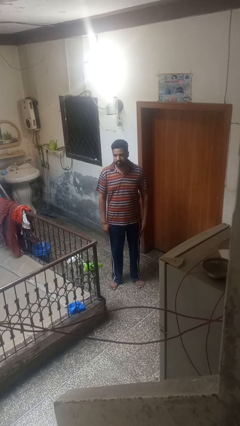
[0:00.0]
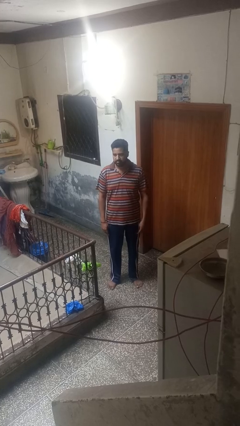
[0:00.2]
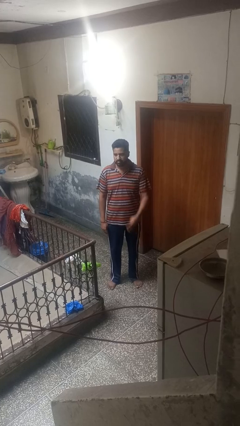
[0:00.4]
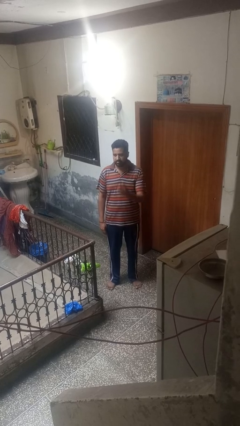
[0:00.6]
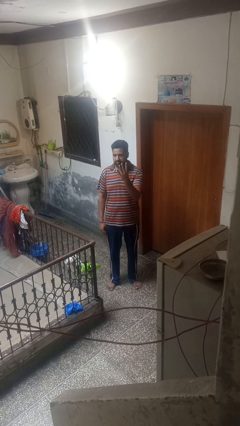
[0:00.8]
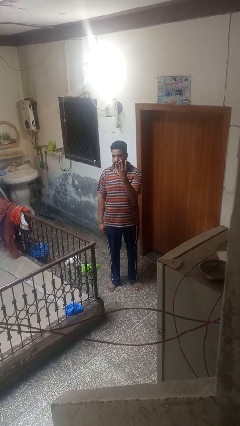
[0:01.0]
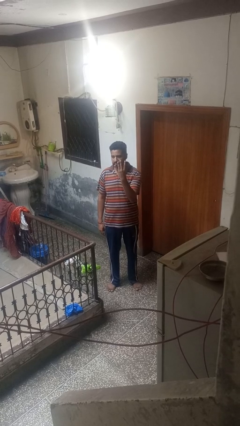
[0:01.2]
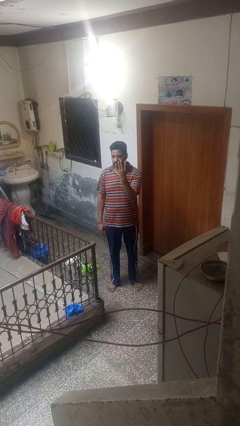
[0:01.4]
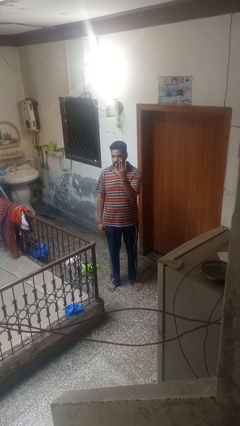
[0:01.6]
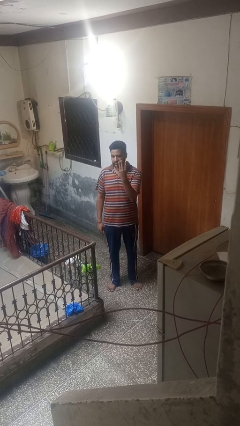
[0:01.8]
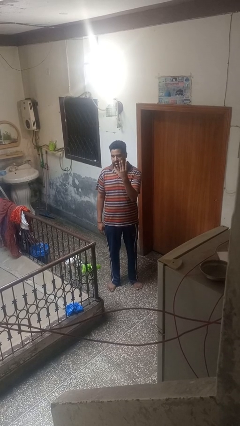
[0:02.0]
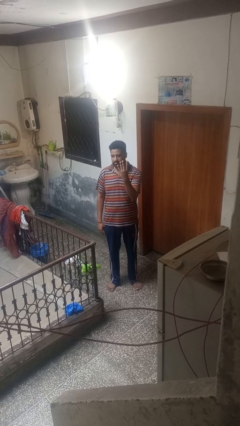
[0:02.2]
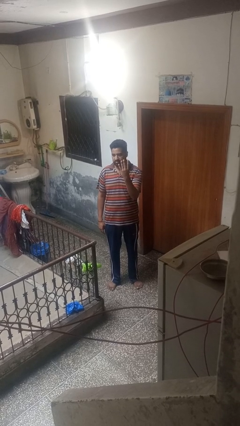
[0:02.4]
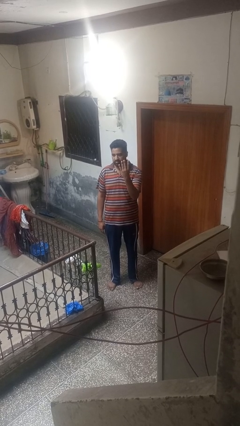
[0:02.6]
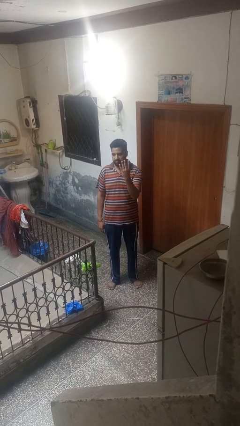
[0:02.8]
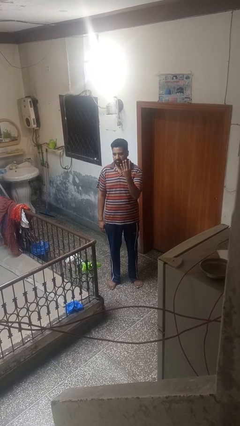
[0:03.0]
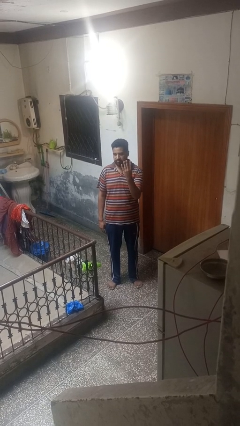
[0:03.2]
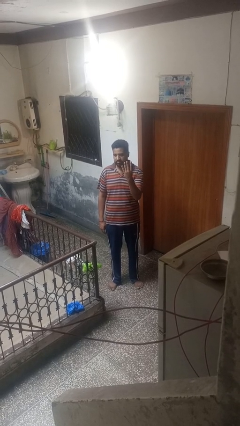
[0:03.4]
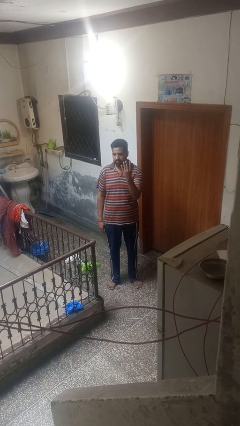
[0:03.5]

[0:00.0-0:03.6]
person gestures number four

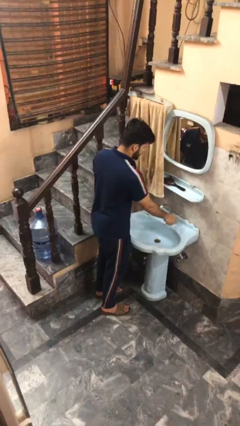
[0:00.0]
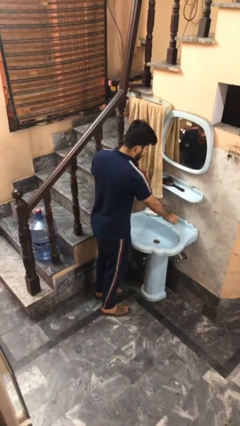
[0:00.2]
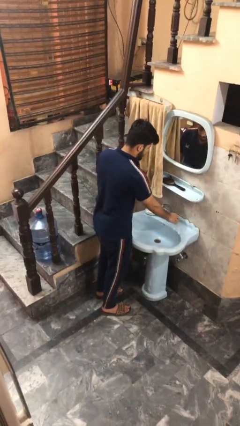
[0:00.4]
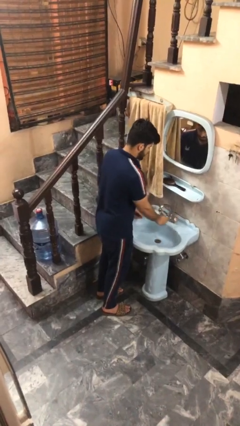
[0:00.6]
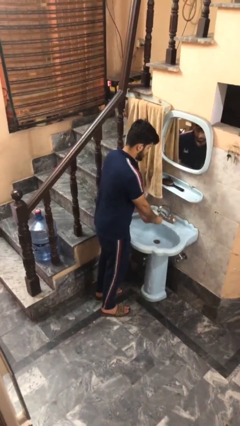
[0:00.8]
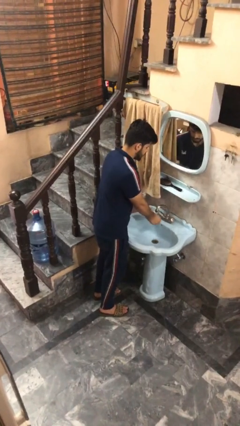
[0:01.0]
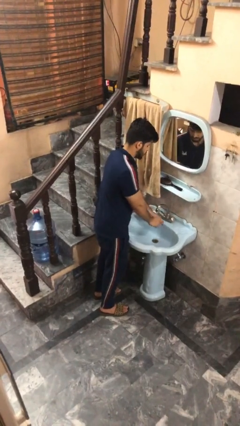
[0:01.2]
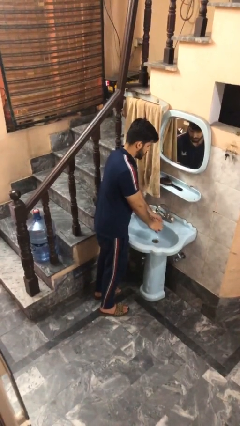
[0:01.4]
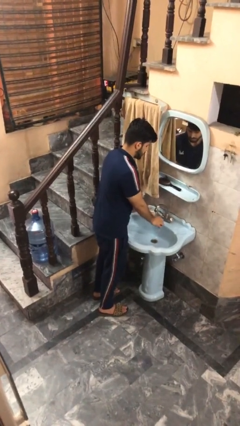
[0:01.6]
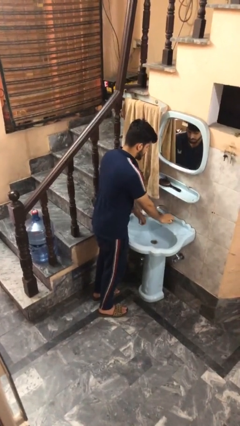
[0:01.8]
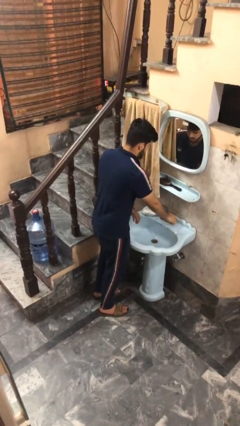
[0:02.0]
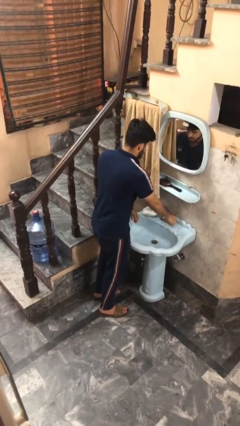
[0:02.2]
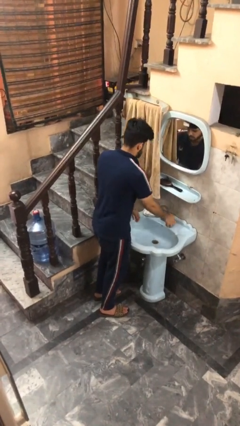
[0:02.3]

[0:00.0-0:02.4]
person washes hands

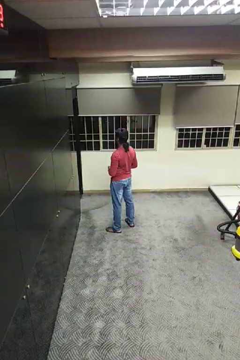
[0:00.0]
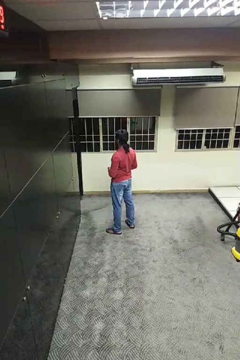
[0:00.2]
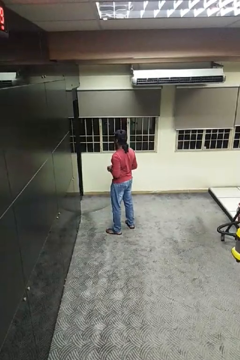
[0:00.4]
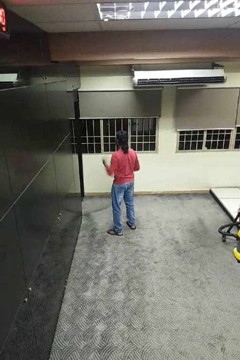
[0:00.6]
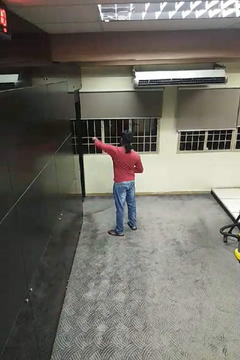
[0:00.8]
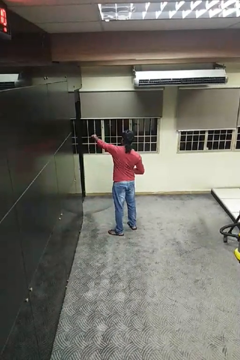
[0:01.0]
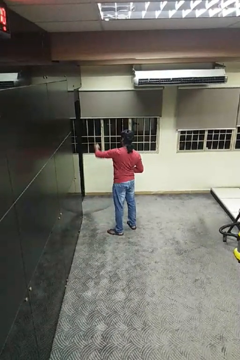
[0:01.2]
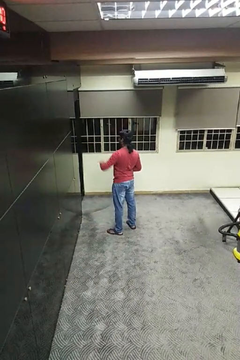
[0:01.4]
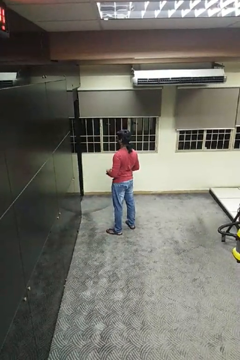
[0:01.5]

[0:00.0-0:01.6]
person punches

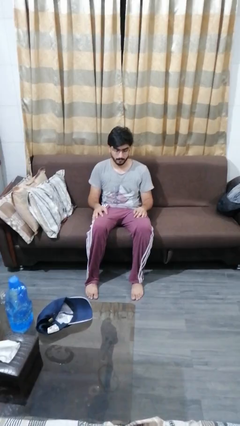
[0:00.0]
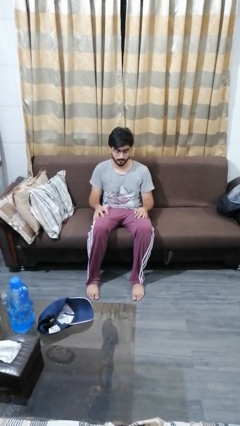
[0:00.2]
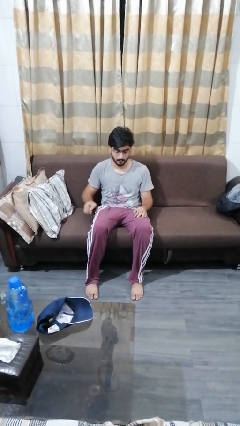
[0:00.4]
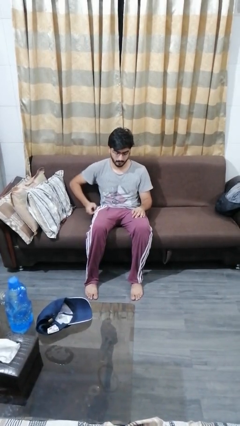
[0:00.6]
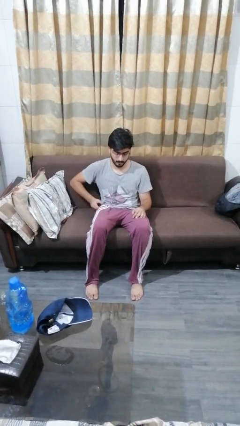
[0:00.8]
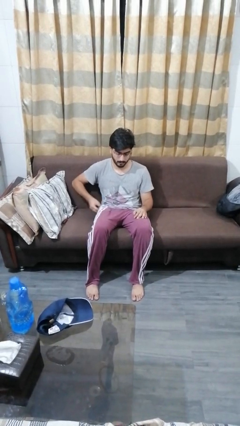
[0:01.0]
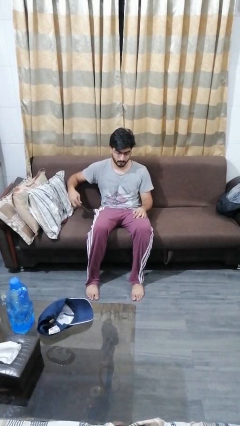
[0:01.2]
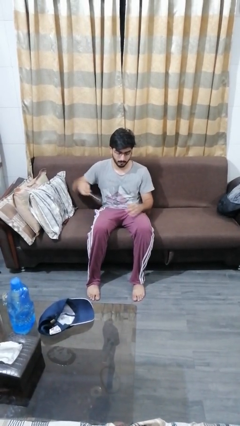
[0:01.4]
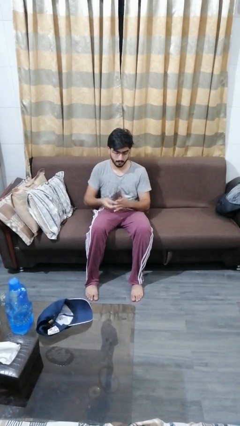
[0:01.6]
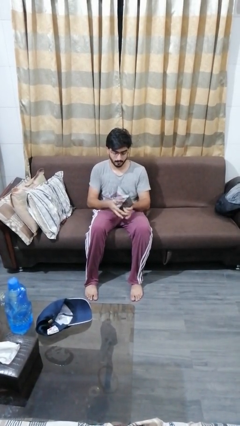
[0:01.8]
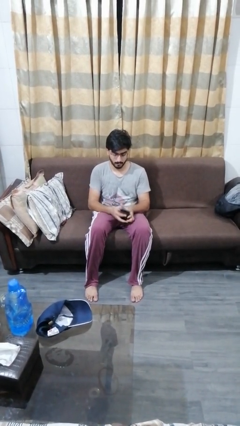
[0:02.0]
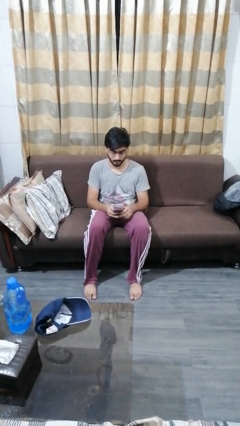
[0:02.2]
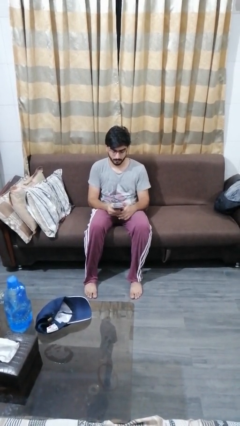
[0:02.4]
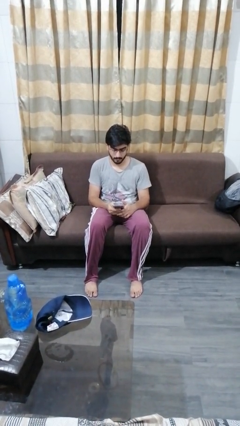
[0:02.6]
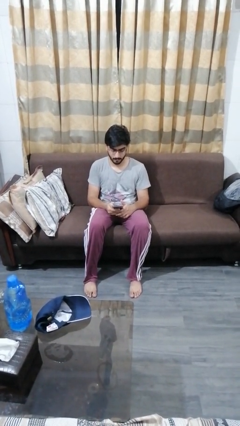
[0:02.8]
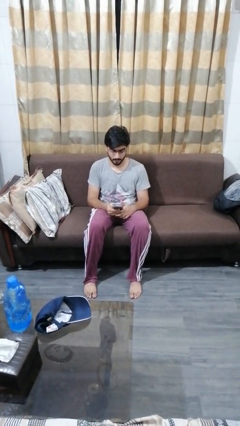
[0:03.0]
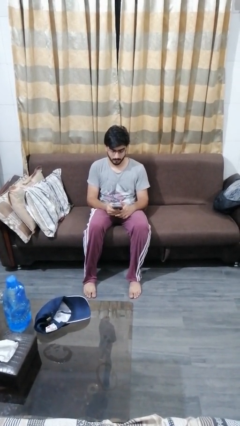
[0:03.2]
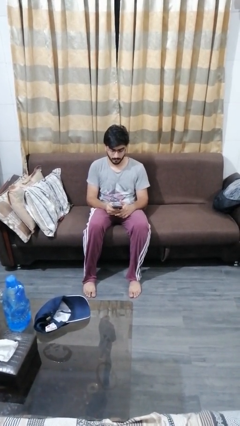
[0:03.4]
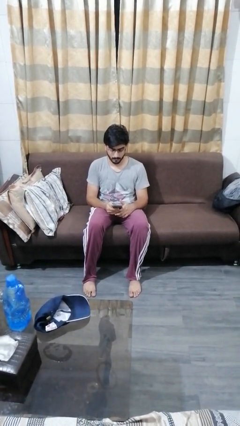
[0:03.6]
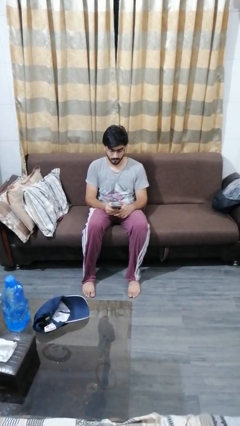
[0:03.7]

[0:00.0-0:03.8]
person takes phone from pocket

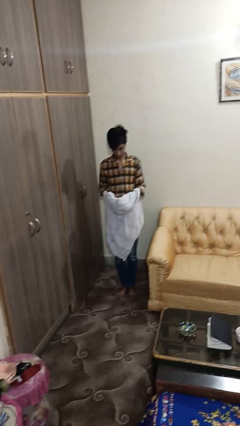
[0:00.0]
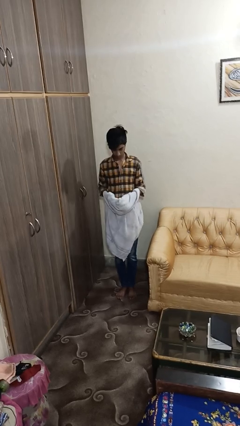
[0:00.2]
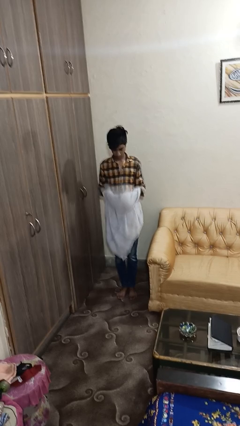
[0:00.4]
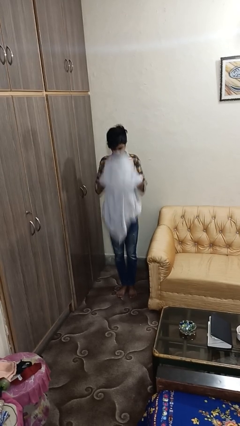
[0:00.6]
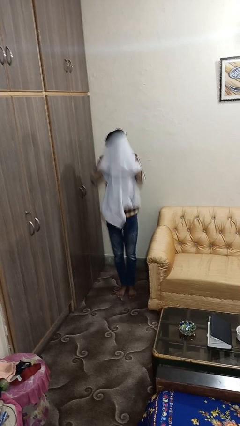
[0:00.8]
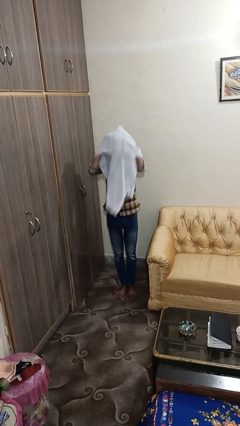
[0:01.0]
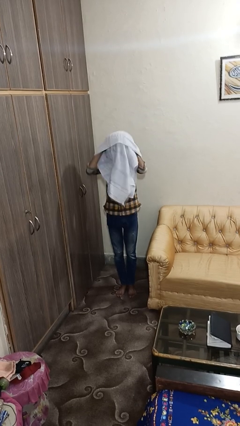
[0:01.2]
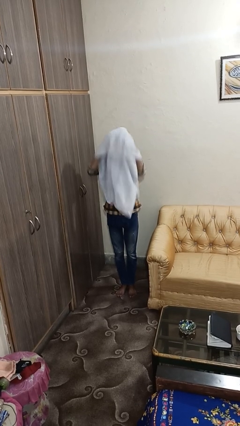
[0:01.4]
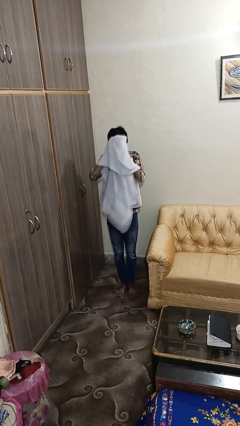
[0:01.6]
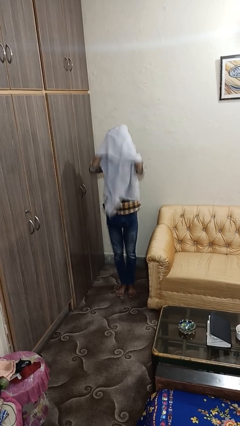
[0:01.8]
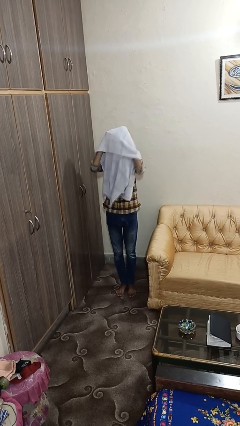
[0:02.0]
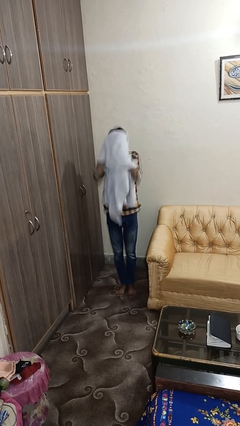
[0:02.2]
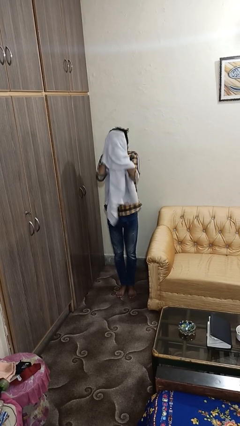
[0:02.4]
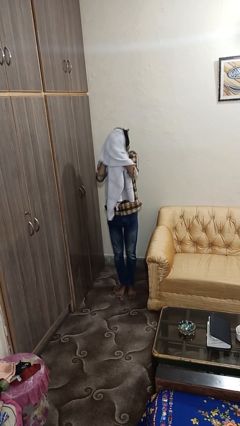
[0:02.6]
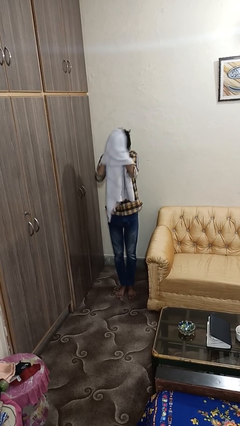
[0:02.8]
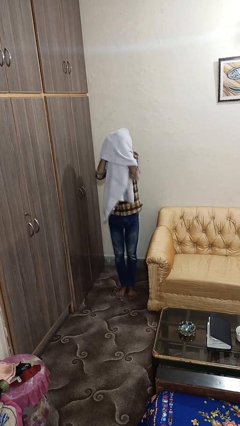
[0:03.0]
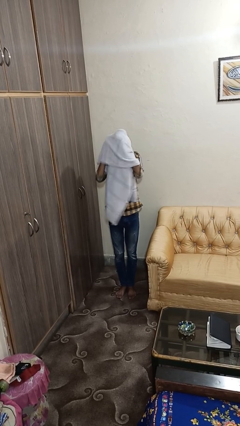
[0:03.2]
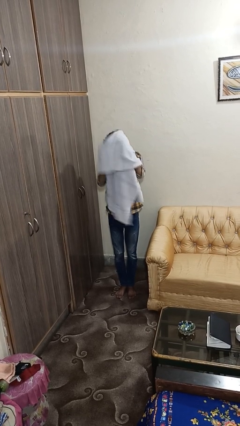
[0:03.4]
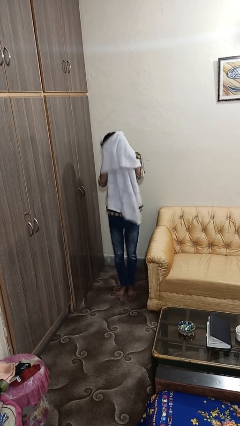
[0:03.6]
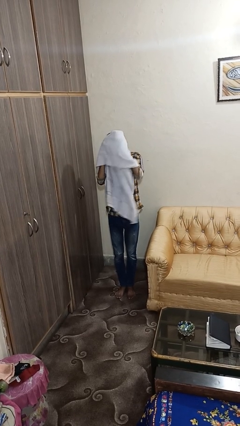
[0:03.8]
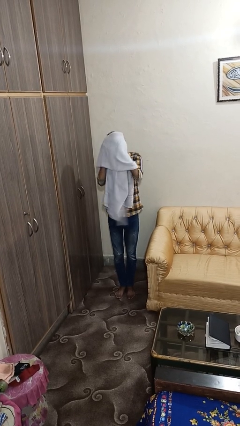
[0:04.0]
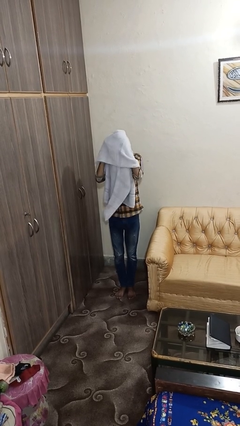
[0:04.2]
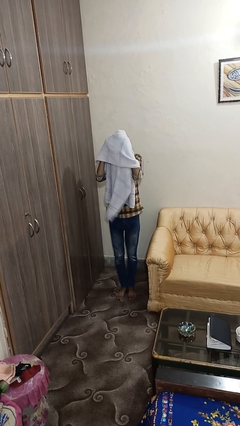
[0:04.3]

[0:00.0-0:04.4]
person dries hair with towel

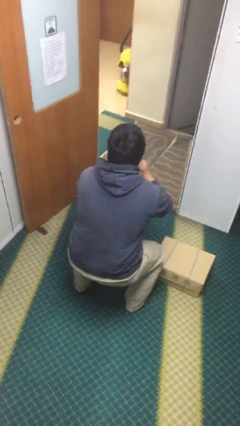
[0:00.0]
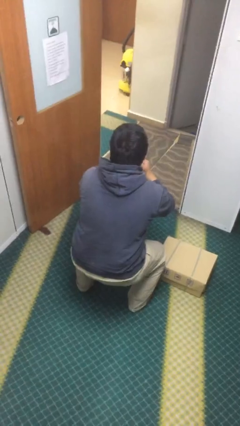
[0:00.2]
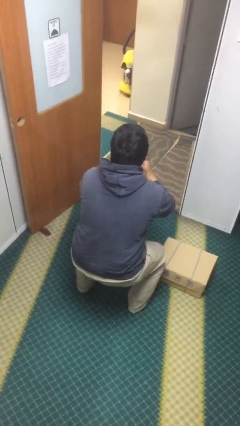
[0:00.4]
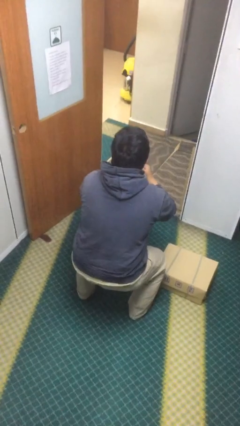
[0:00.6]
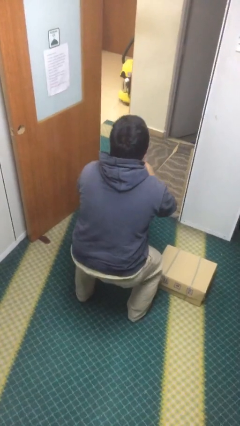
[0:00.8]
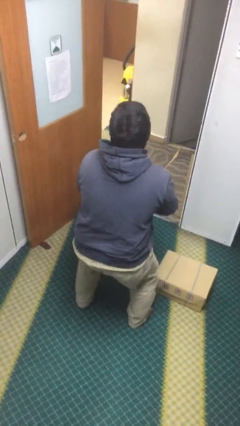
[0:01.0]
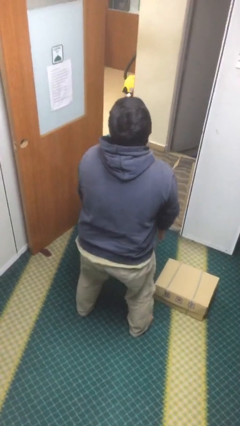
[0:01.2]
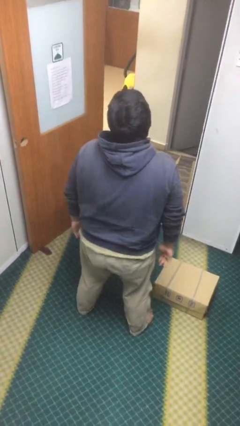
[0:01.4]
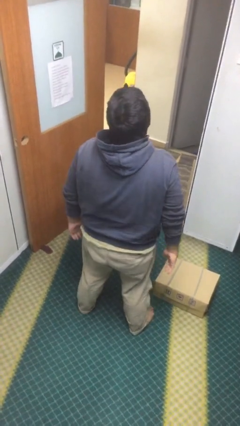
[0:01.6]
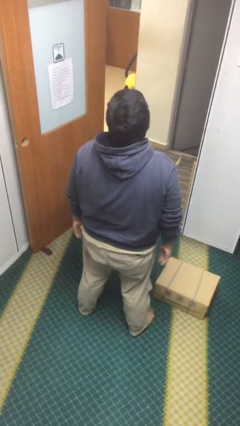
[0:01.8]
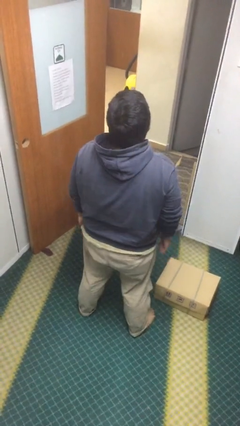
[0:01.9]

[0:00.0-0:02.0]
person stands up
